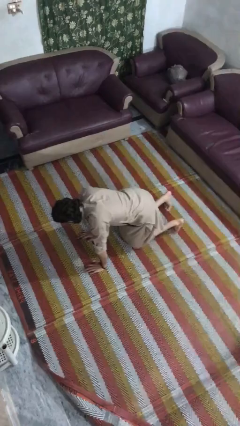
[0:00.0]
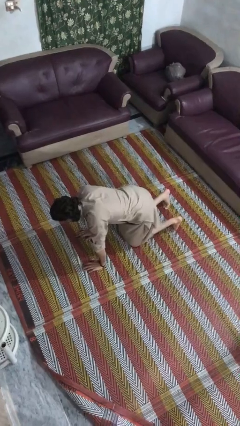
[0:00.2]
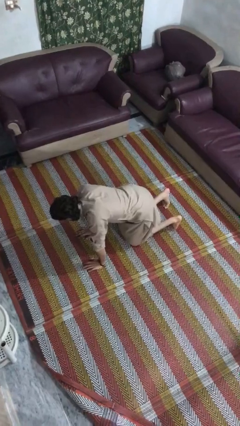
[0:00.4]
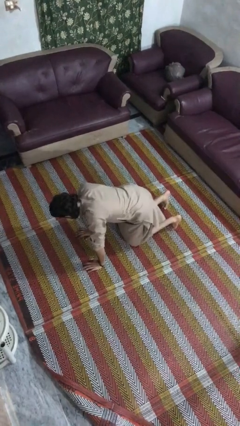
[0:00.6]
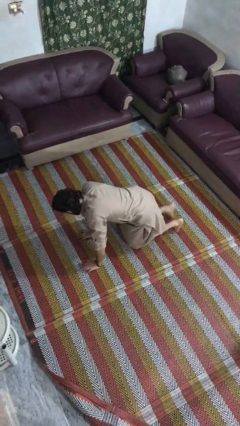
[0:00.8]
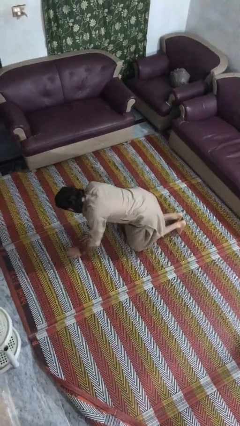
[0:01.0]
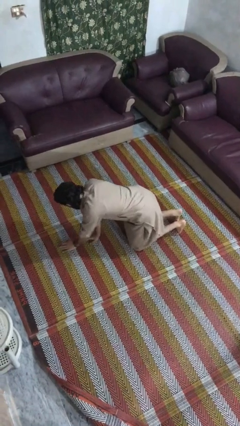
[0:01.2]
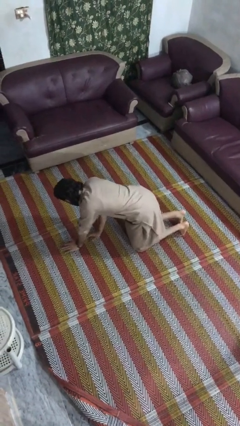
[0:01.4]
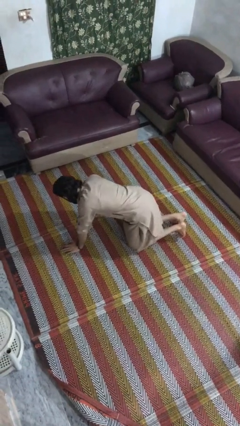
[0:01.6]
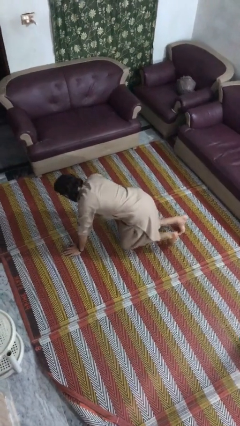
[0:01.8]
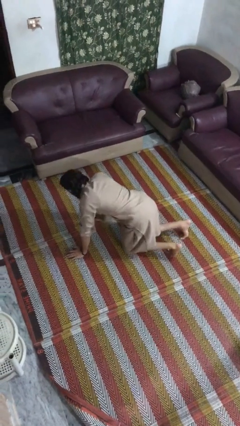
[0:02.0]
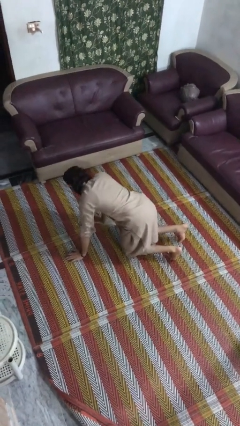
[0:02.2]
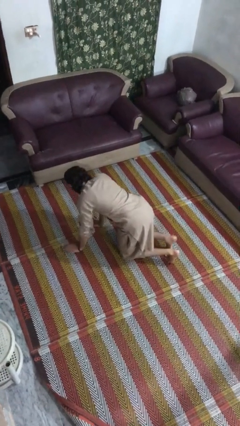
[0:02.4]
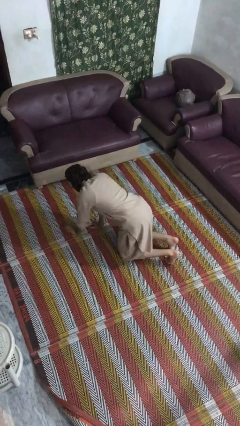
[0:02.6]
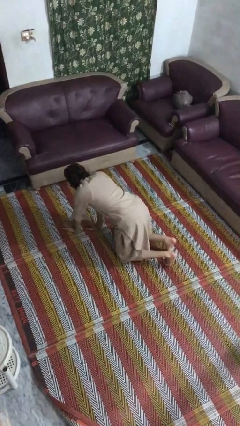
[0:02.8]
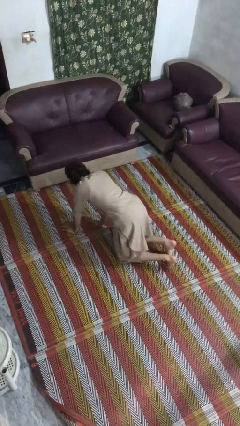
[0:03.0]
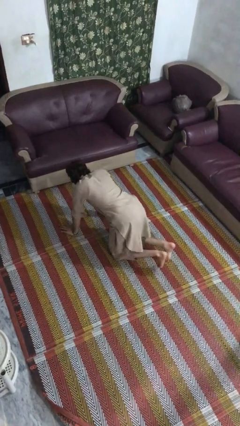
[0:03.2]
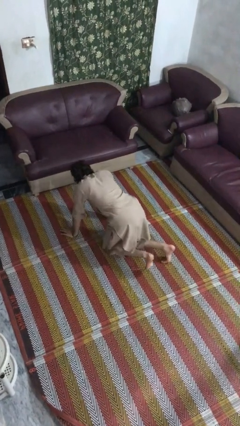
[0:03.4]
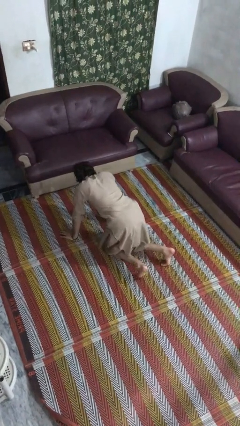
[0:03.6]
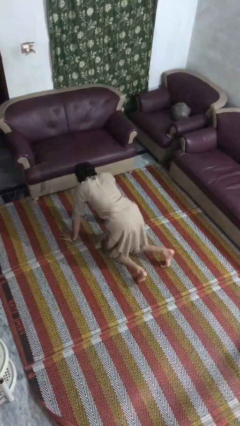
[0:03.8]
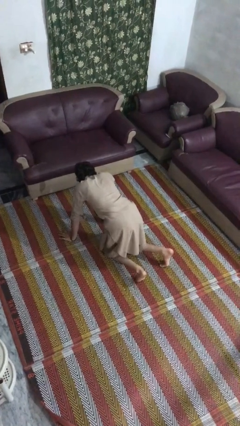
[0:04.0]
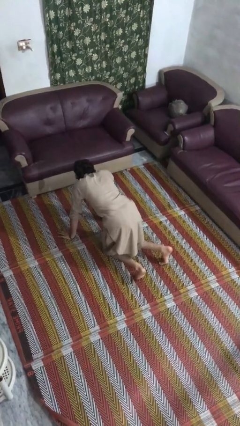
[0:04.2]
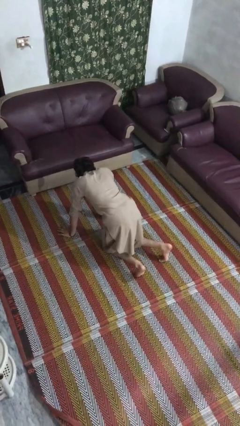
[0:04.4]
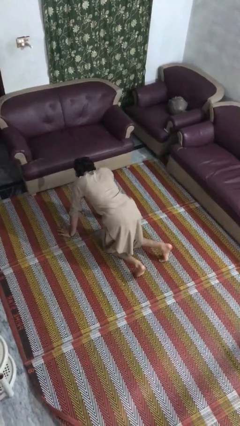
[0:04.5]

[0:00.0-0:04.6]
person crawls

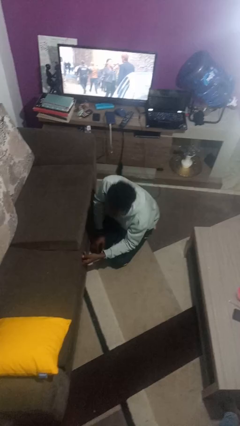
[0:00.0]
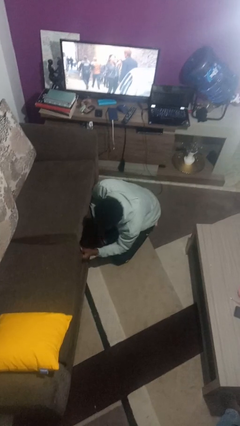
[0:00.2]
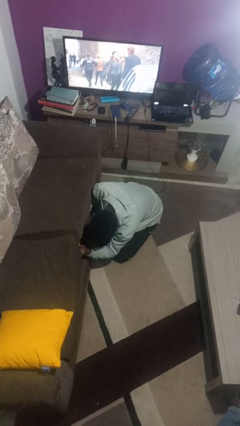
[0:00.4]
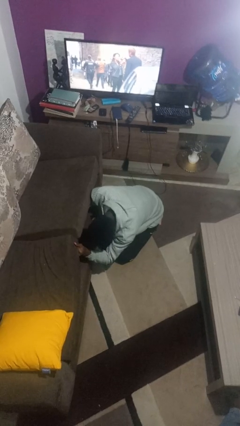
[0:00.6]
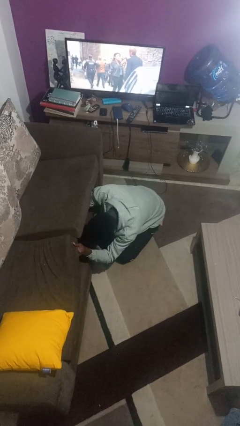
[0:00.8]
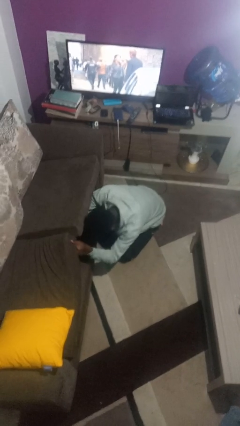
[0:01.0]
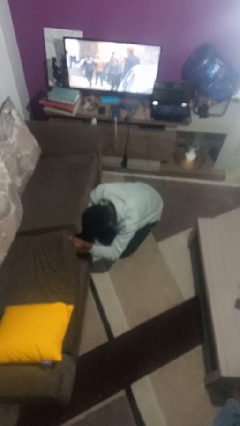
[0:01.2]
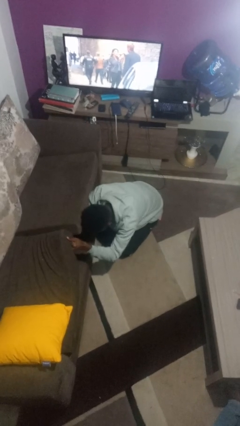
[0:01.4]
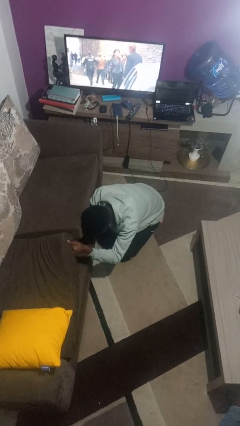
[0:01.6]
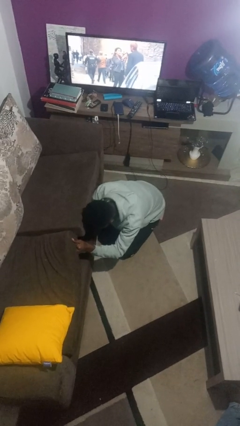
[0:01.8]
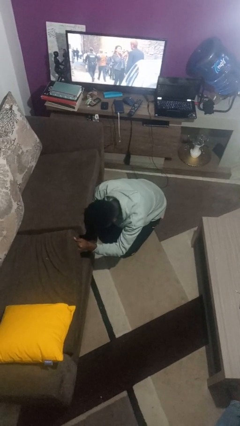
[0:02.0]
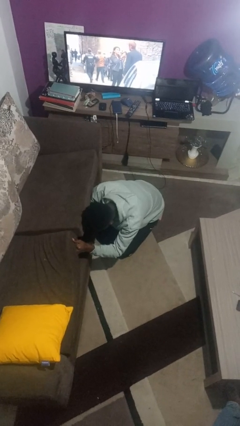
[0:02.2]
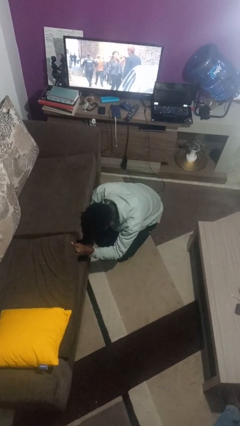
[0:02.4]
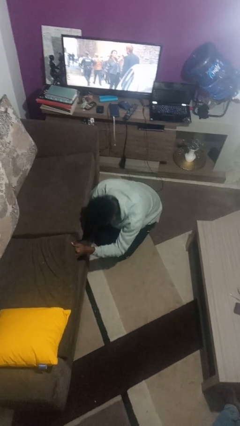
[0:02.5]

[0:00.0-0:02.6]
person searches under couch

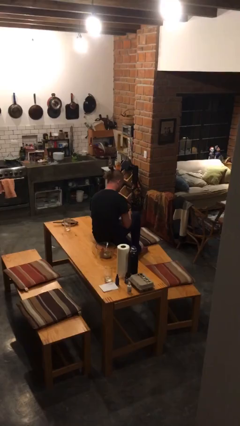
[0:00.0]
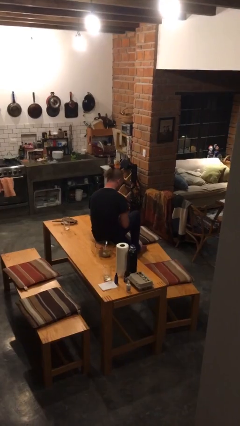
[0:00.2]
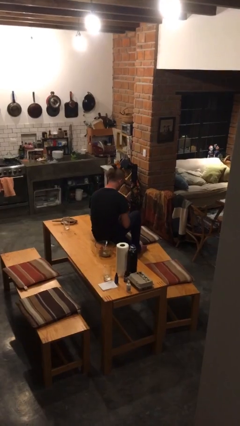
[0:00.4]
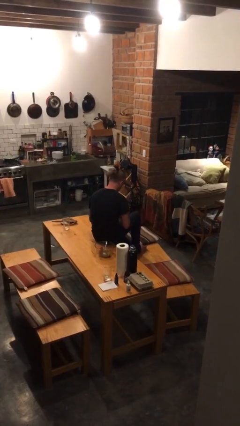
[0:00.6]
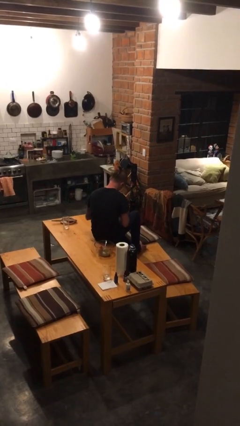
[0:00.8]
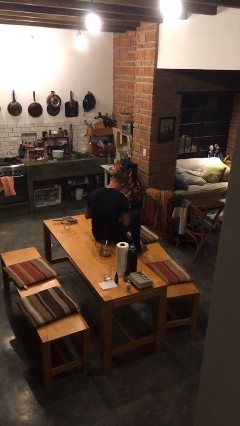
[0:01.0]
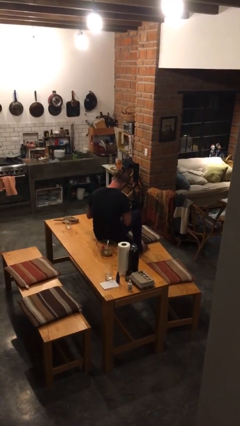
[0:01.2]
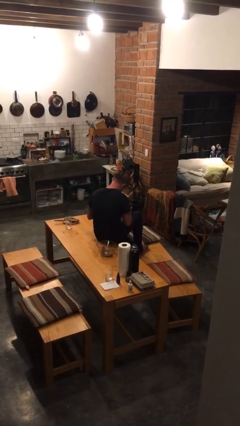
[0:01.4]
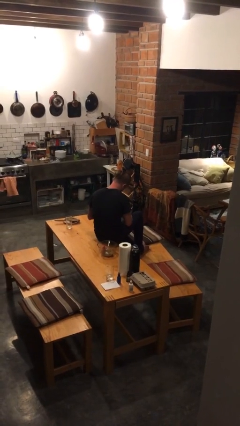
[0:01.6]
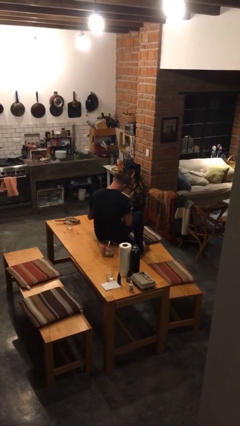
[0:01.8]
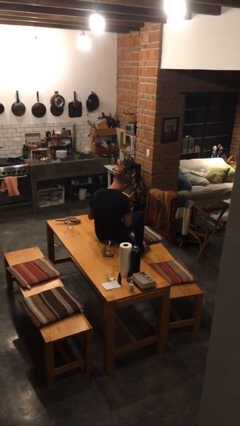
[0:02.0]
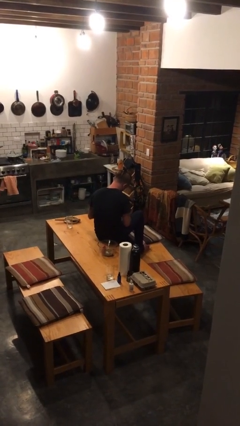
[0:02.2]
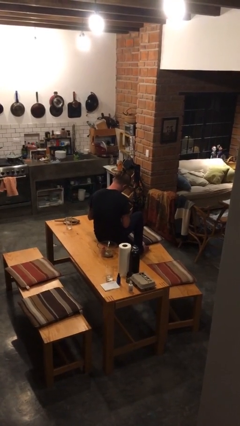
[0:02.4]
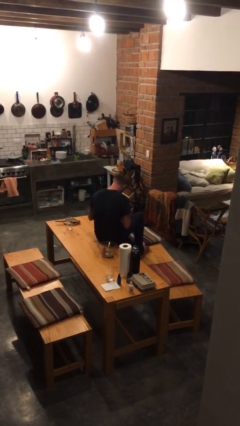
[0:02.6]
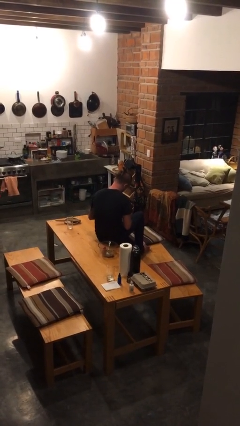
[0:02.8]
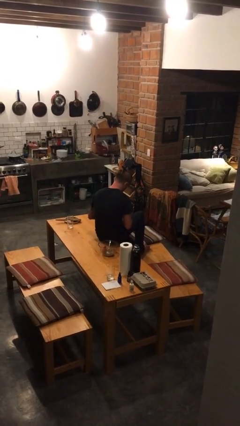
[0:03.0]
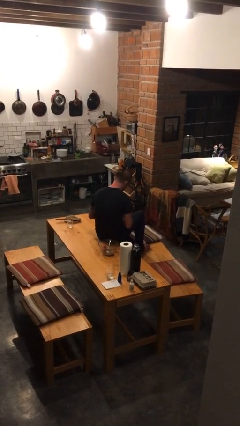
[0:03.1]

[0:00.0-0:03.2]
person paints fingernails

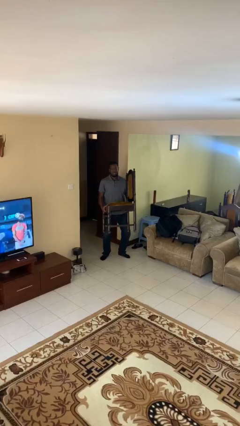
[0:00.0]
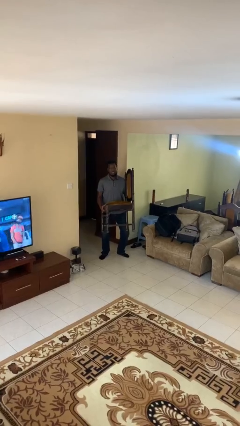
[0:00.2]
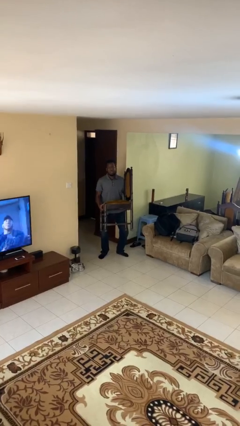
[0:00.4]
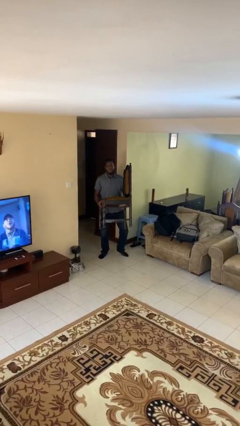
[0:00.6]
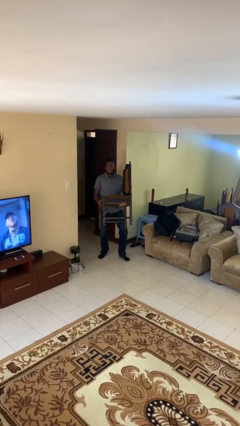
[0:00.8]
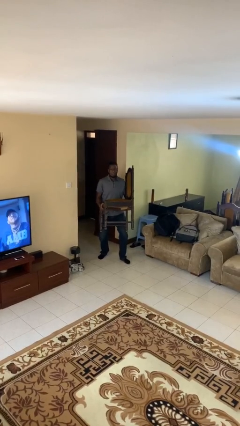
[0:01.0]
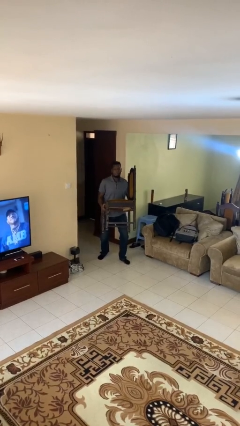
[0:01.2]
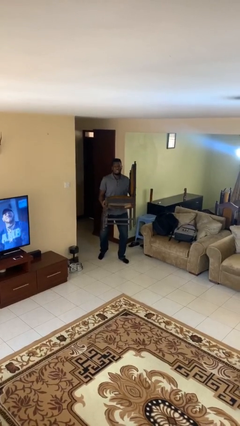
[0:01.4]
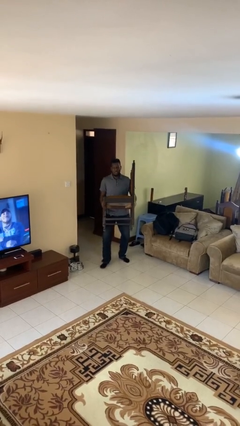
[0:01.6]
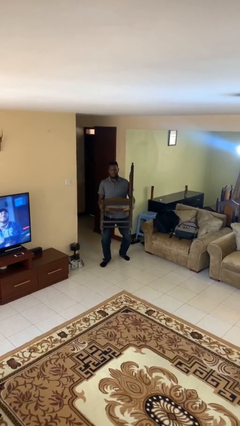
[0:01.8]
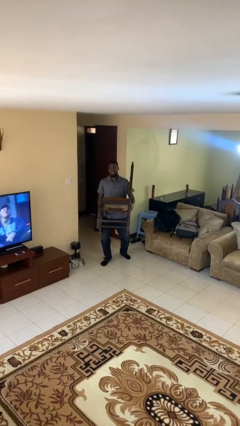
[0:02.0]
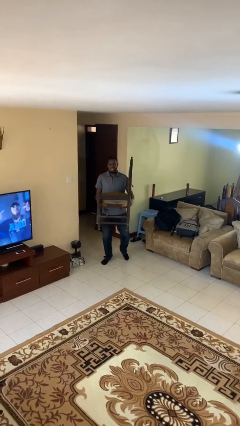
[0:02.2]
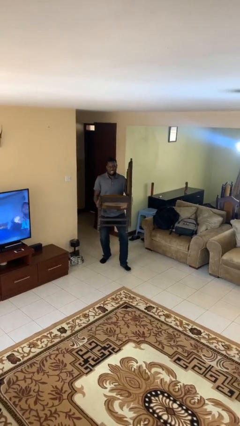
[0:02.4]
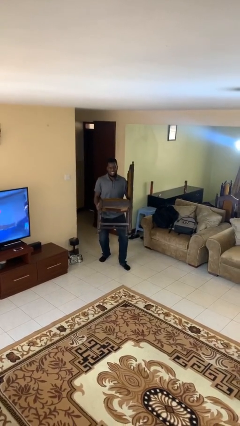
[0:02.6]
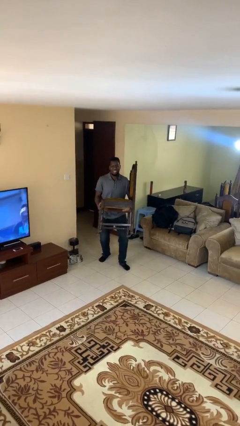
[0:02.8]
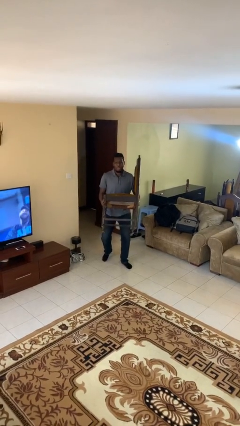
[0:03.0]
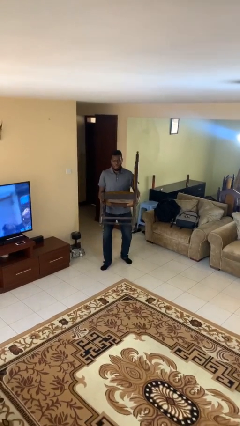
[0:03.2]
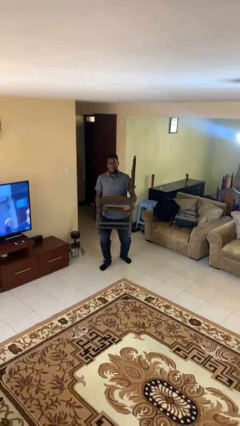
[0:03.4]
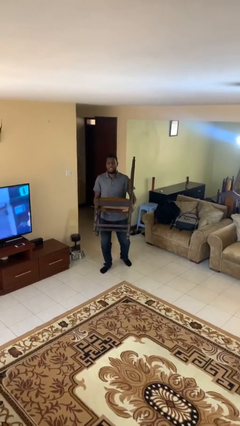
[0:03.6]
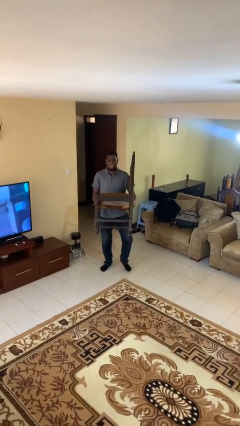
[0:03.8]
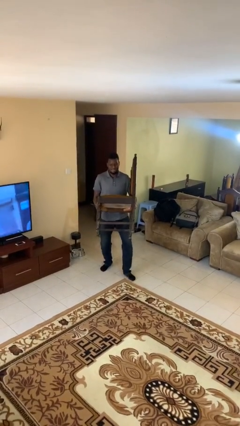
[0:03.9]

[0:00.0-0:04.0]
person carries heavy object

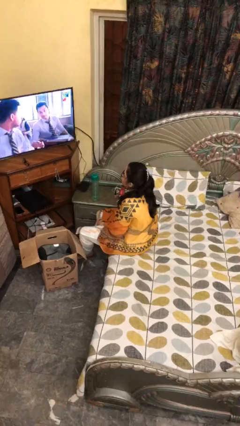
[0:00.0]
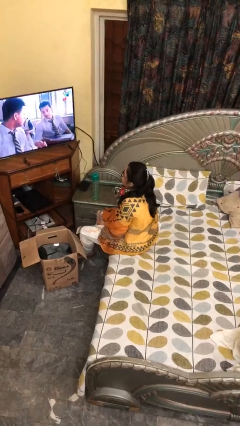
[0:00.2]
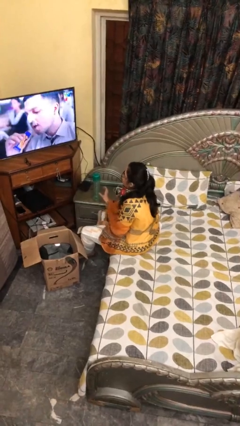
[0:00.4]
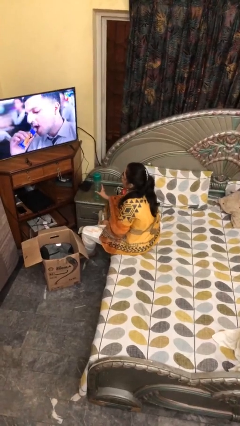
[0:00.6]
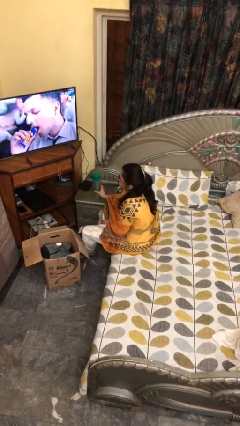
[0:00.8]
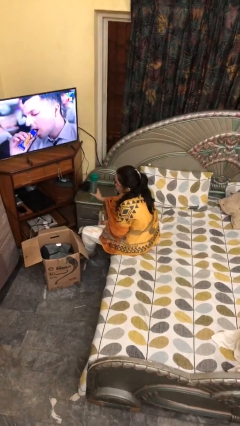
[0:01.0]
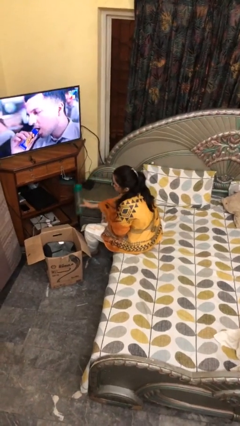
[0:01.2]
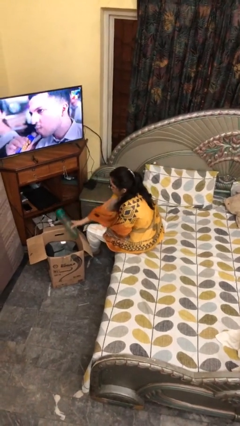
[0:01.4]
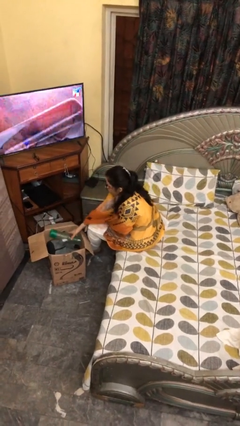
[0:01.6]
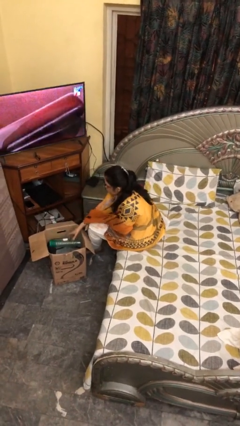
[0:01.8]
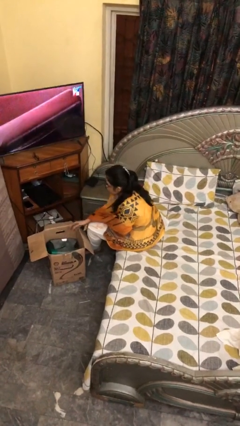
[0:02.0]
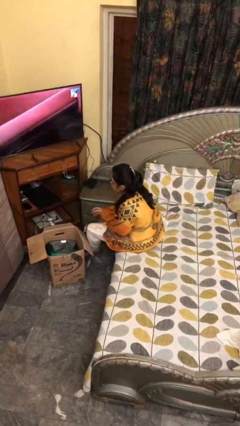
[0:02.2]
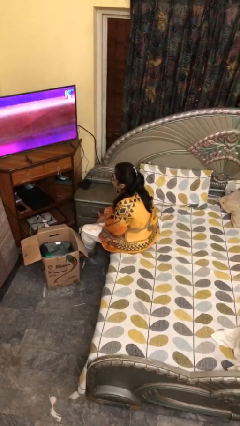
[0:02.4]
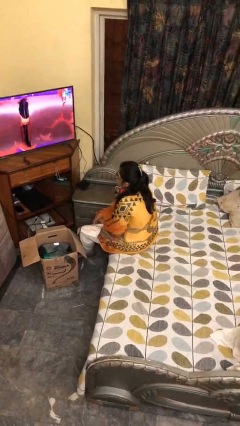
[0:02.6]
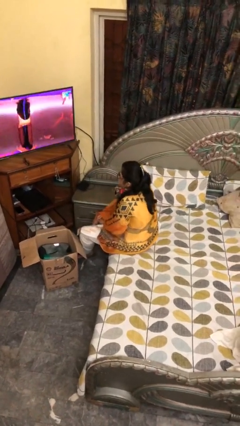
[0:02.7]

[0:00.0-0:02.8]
person puts object into box

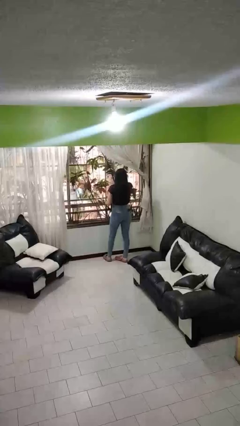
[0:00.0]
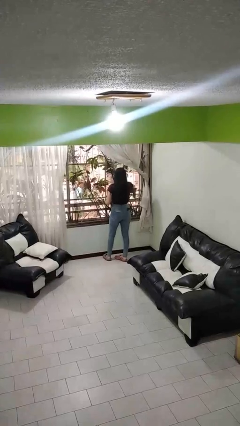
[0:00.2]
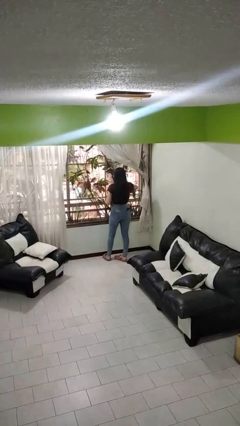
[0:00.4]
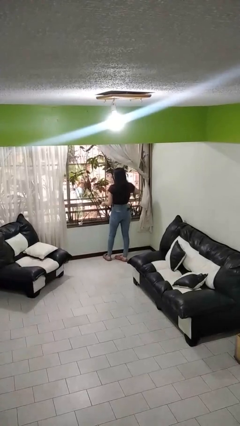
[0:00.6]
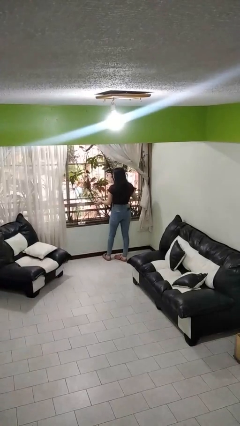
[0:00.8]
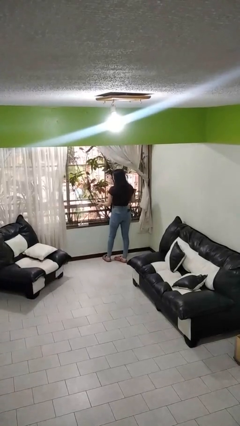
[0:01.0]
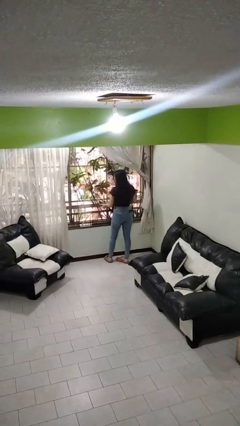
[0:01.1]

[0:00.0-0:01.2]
person opens home window
